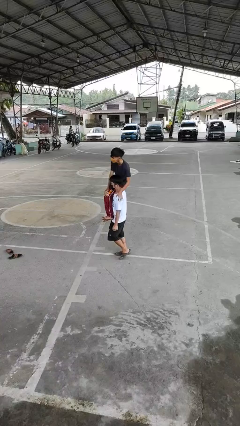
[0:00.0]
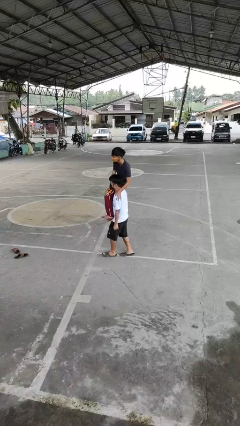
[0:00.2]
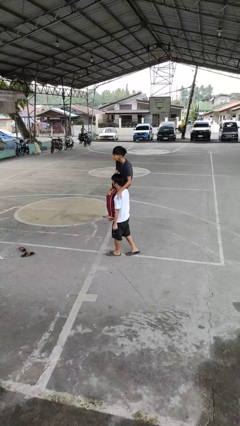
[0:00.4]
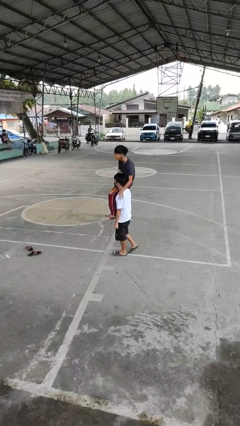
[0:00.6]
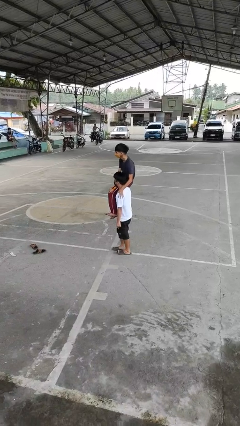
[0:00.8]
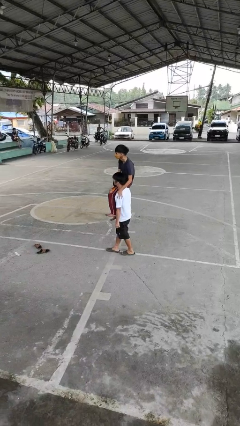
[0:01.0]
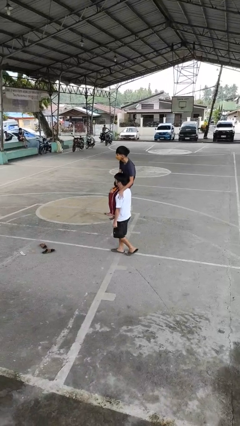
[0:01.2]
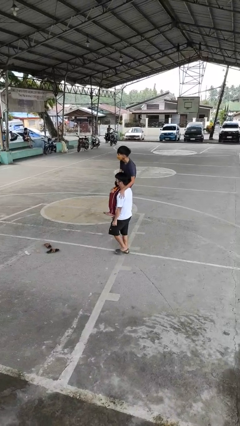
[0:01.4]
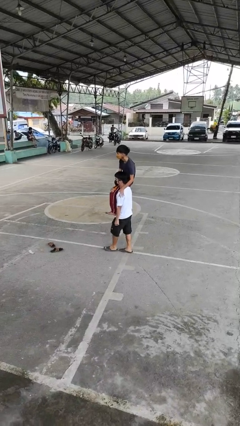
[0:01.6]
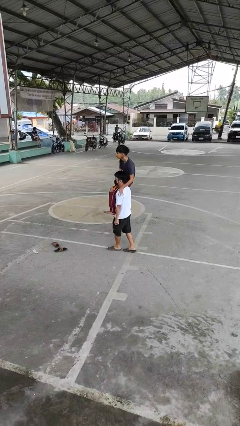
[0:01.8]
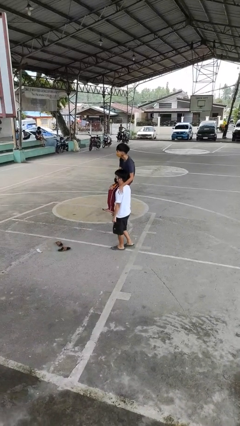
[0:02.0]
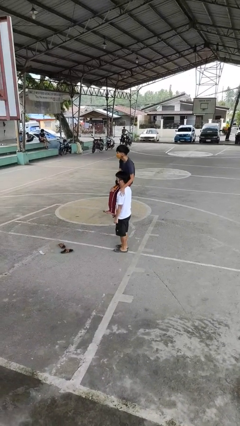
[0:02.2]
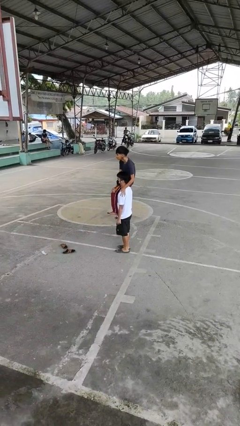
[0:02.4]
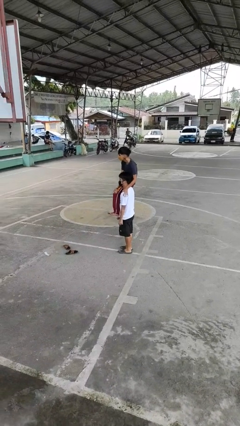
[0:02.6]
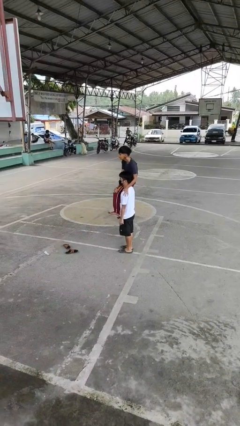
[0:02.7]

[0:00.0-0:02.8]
person carries person on shoulders

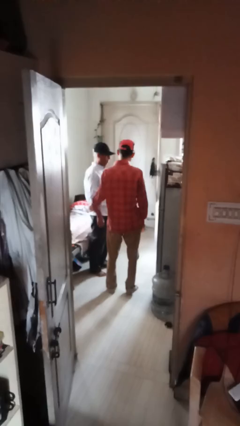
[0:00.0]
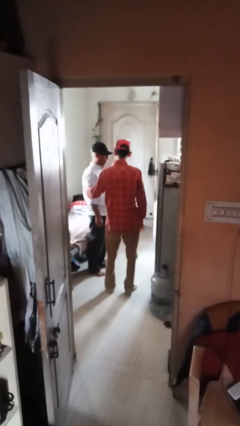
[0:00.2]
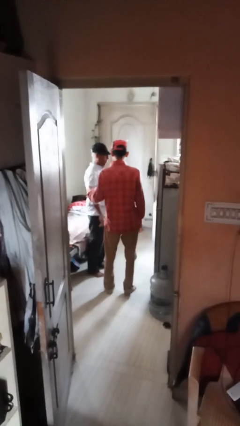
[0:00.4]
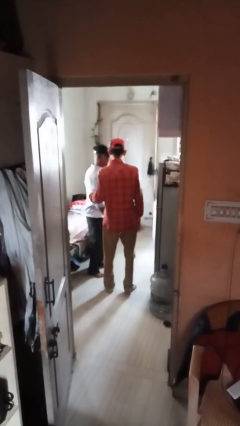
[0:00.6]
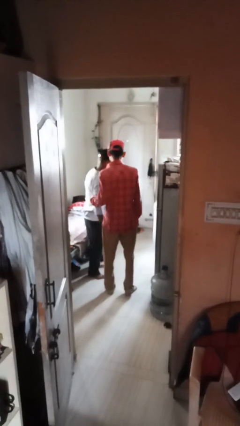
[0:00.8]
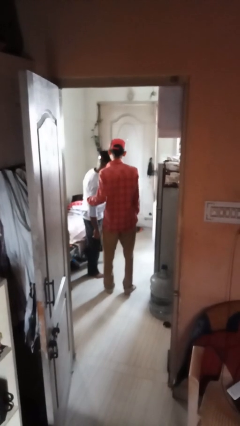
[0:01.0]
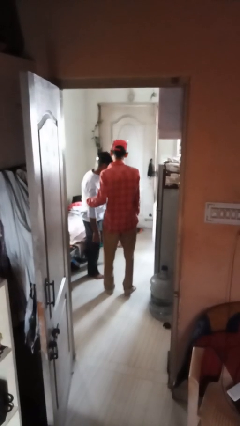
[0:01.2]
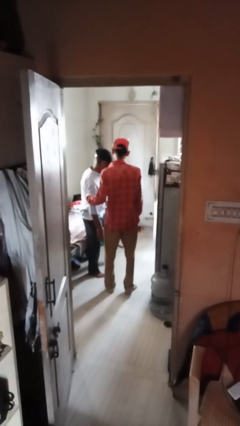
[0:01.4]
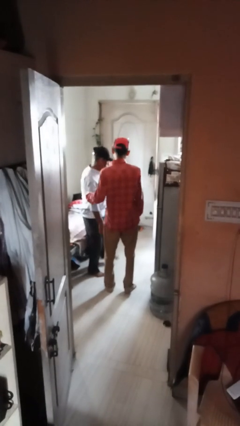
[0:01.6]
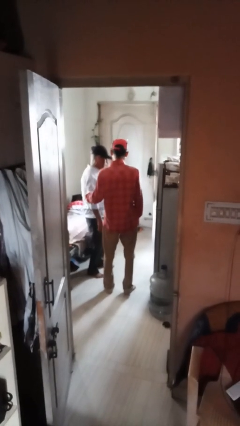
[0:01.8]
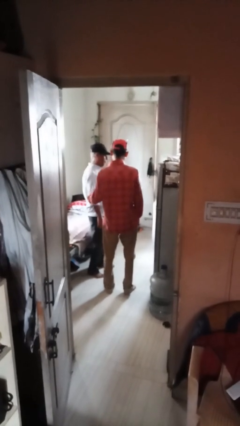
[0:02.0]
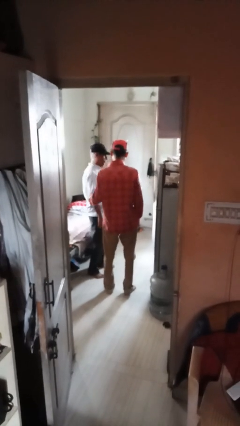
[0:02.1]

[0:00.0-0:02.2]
person grabs person by bicep

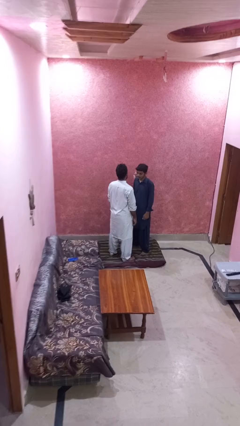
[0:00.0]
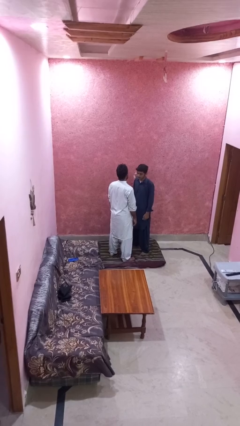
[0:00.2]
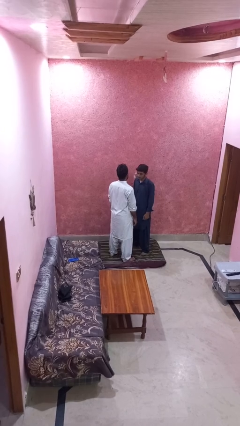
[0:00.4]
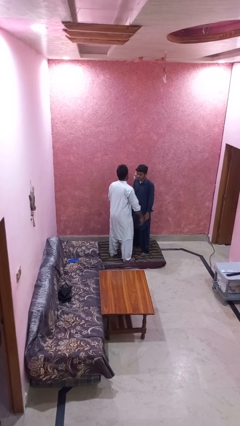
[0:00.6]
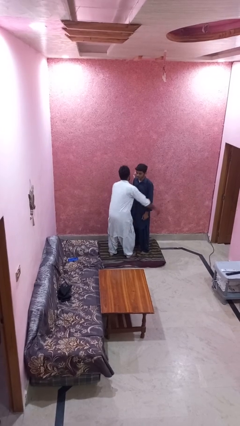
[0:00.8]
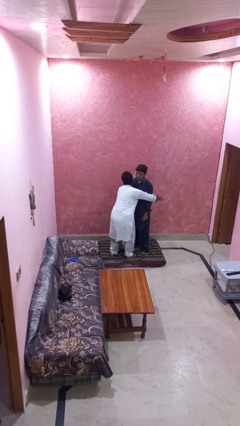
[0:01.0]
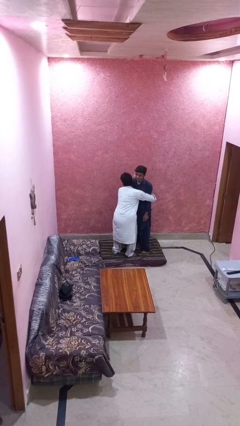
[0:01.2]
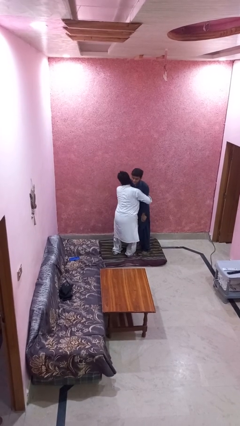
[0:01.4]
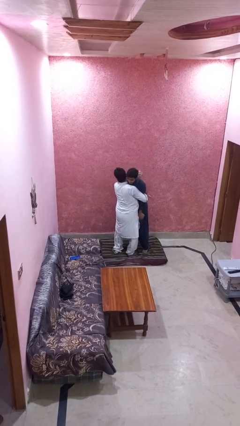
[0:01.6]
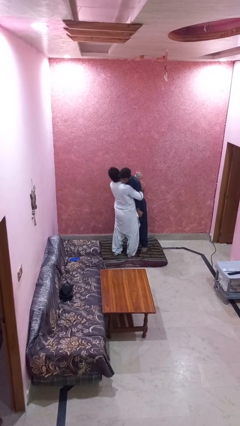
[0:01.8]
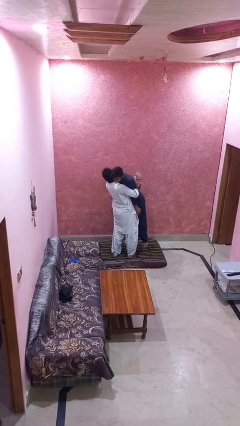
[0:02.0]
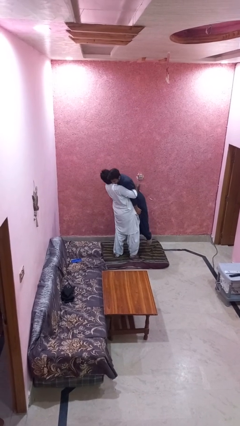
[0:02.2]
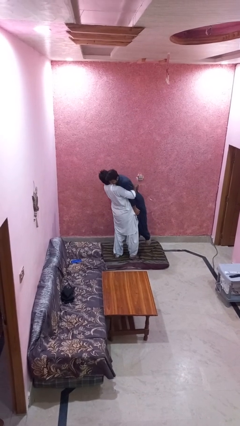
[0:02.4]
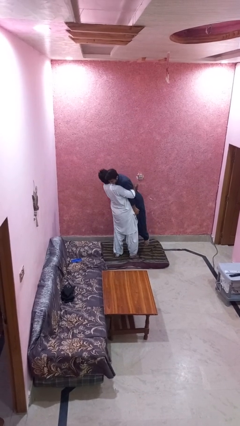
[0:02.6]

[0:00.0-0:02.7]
person picks up person

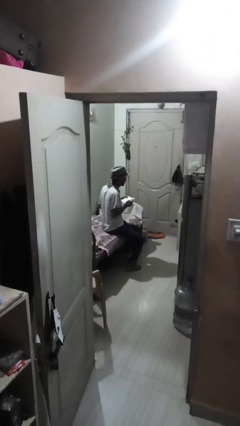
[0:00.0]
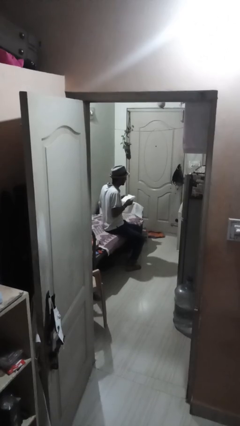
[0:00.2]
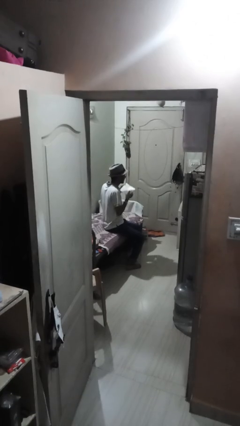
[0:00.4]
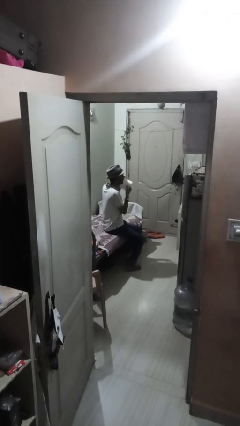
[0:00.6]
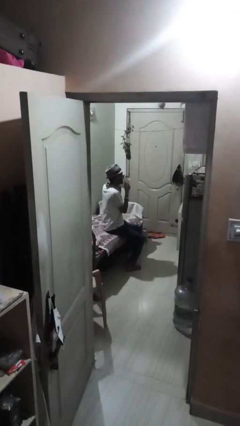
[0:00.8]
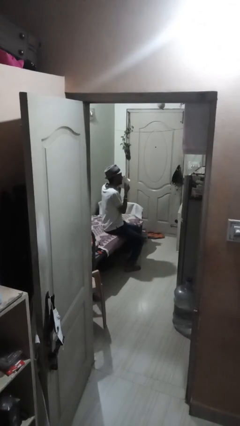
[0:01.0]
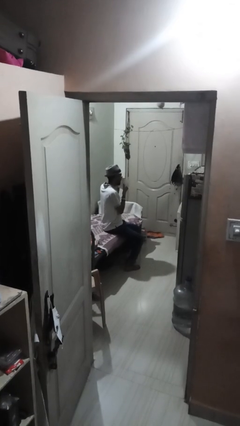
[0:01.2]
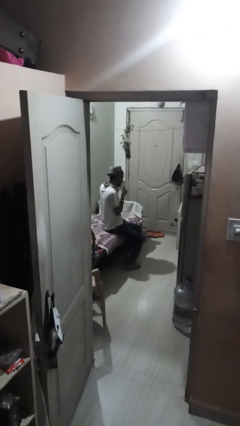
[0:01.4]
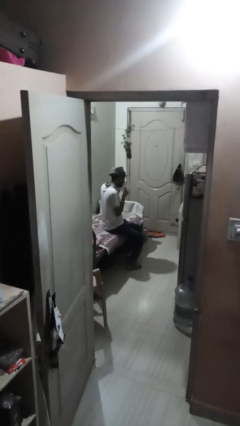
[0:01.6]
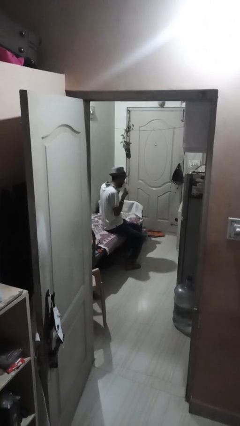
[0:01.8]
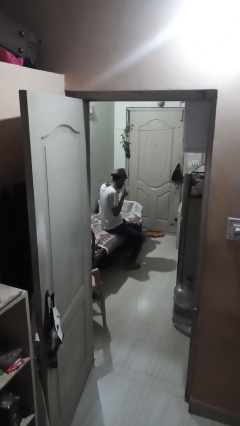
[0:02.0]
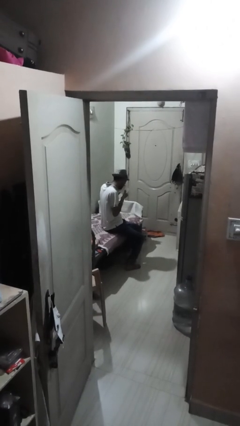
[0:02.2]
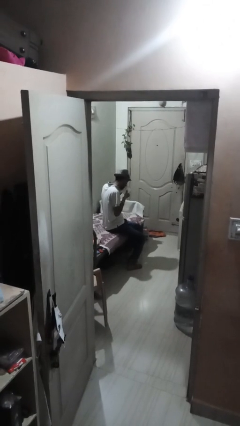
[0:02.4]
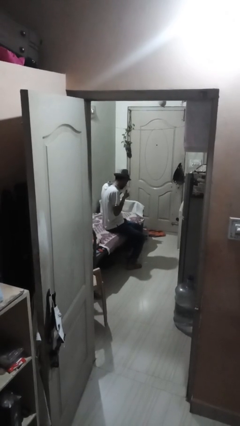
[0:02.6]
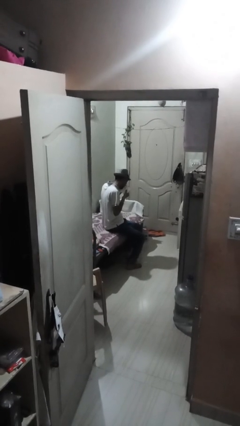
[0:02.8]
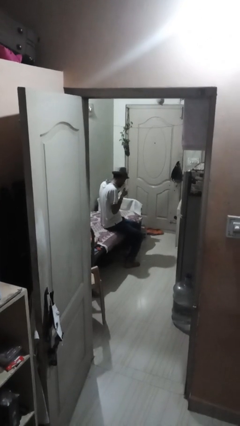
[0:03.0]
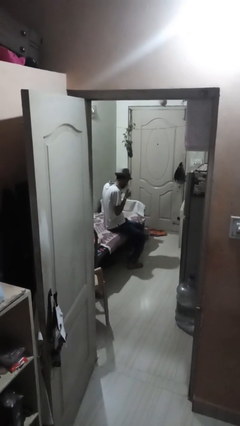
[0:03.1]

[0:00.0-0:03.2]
person blows nose

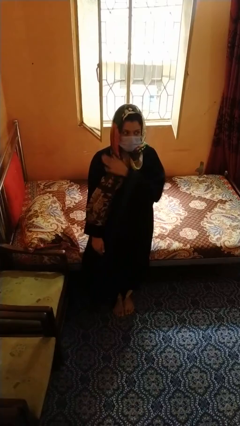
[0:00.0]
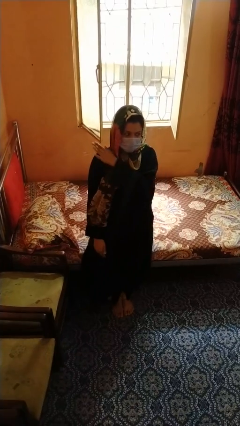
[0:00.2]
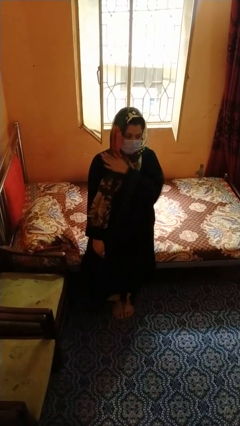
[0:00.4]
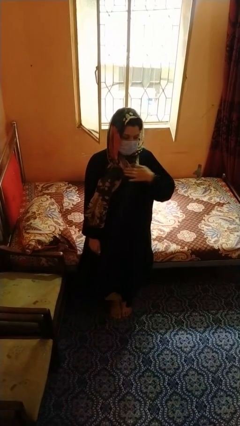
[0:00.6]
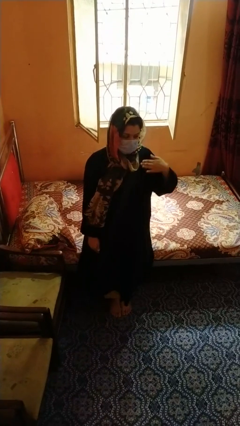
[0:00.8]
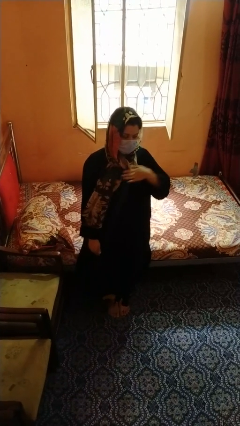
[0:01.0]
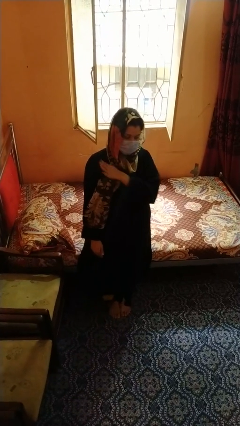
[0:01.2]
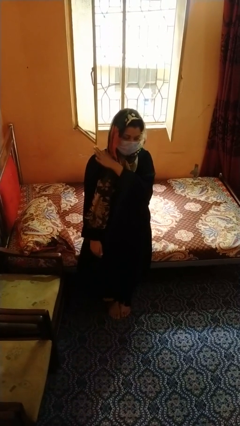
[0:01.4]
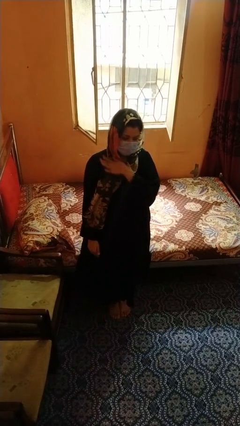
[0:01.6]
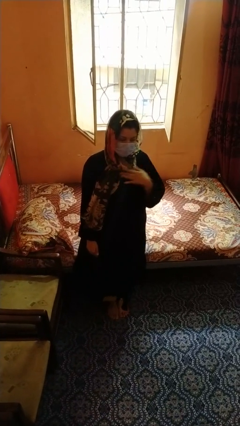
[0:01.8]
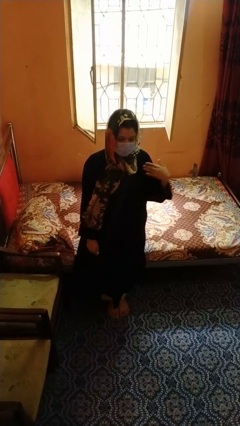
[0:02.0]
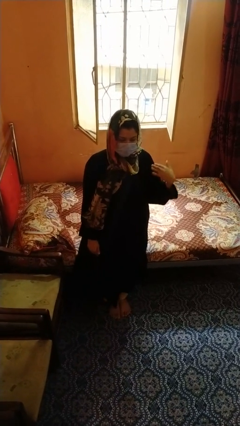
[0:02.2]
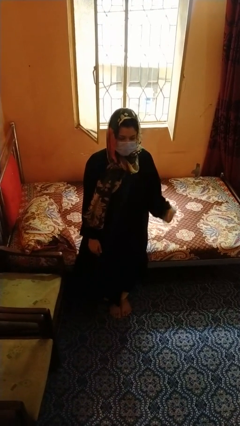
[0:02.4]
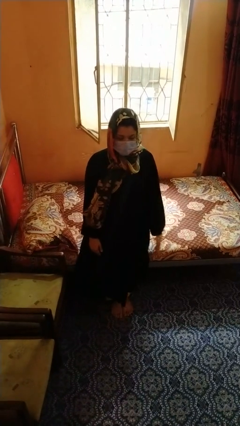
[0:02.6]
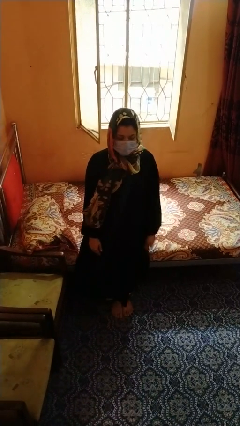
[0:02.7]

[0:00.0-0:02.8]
person gestures cut

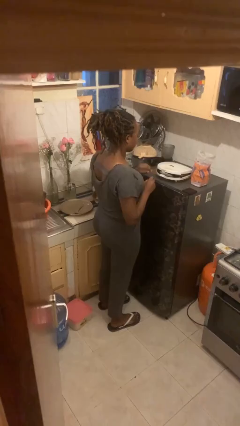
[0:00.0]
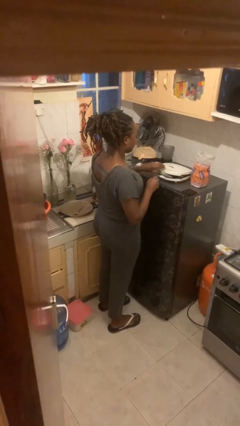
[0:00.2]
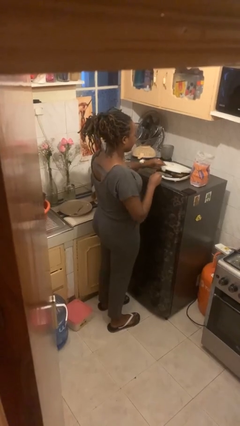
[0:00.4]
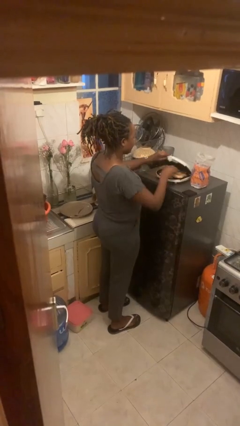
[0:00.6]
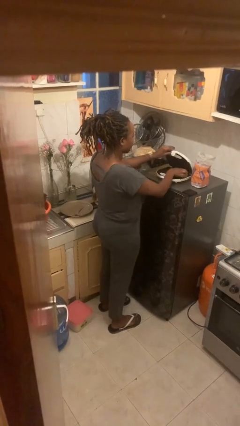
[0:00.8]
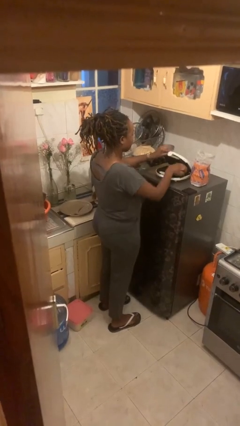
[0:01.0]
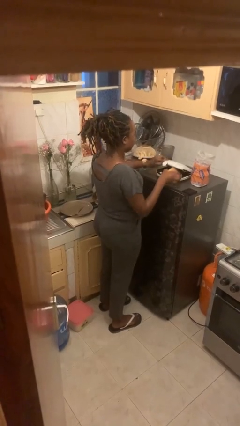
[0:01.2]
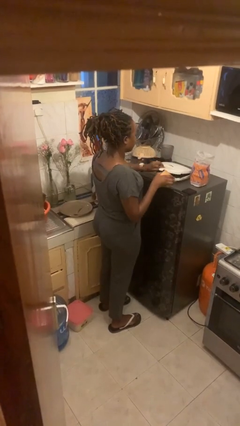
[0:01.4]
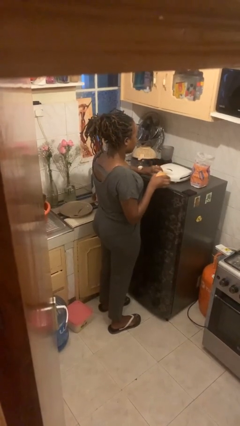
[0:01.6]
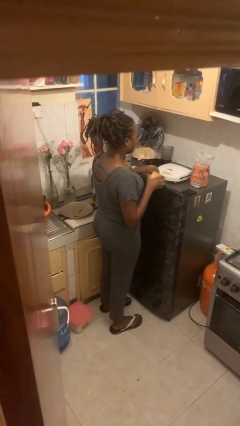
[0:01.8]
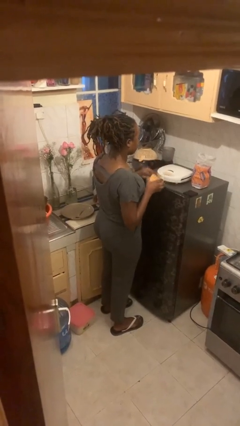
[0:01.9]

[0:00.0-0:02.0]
person takes object from toaster

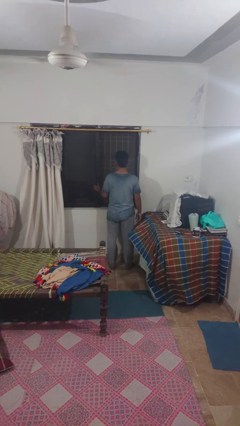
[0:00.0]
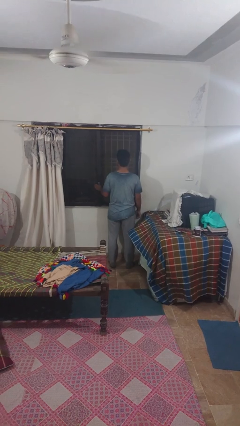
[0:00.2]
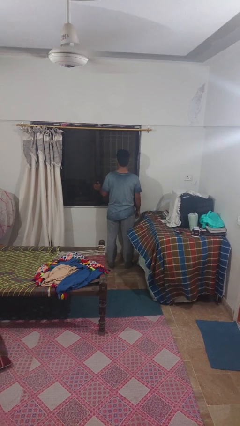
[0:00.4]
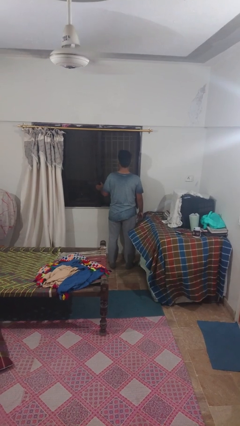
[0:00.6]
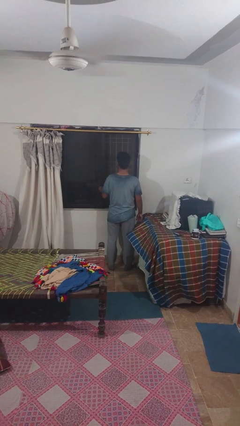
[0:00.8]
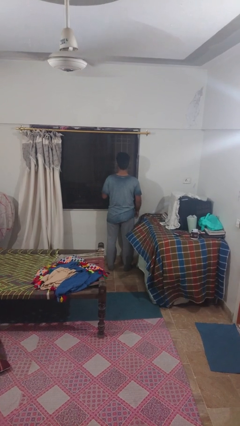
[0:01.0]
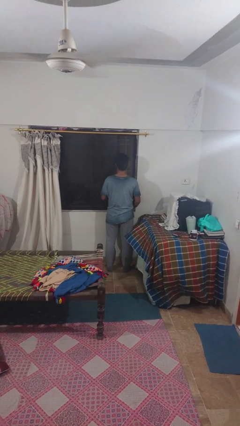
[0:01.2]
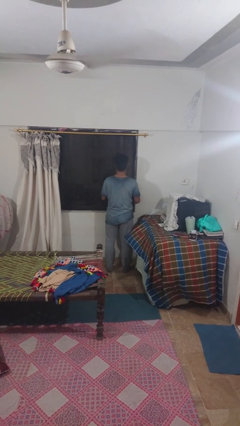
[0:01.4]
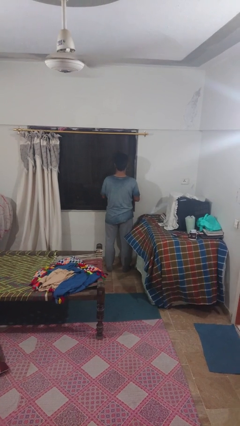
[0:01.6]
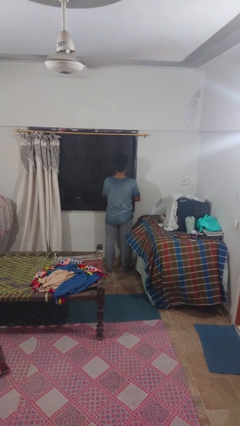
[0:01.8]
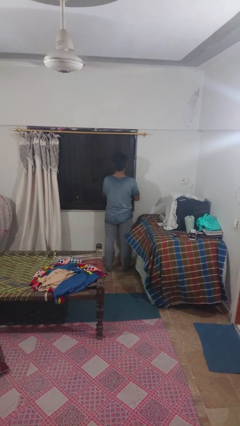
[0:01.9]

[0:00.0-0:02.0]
person closes sliding door
